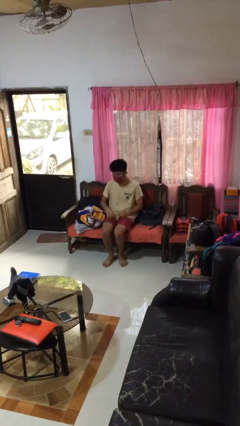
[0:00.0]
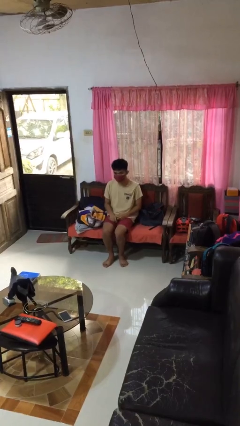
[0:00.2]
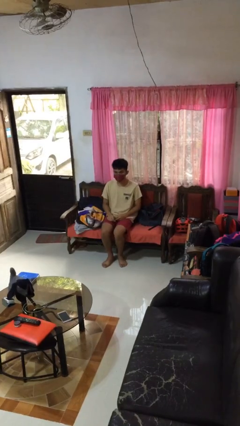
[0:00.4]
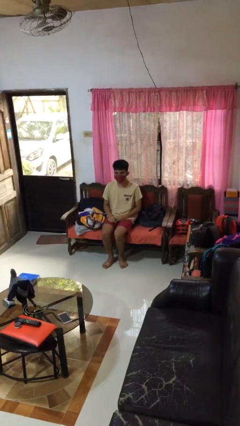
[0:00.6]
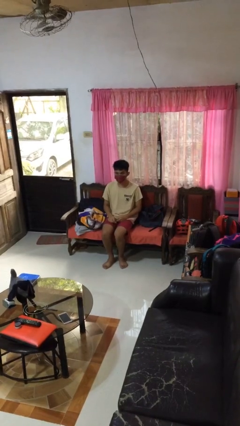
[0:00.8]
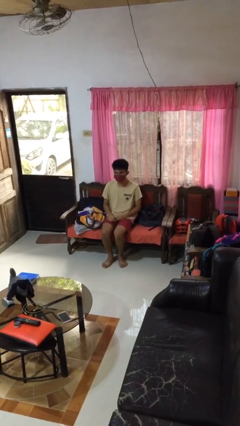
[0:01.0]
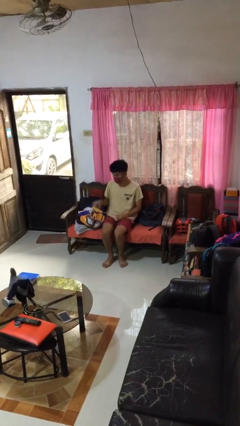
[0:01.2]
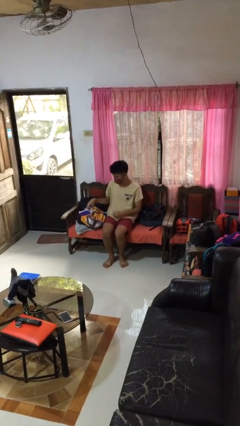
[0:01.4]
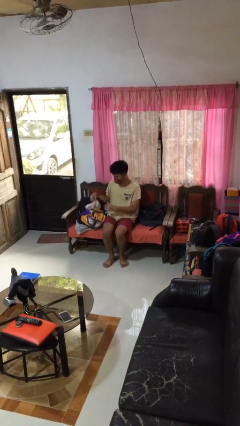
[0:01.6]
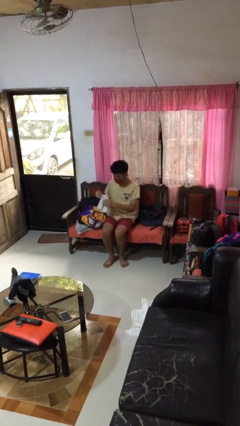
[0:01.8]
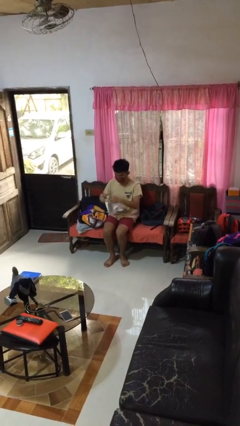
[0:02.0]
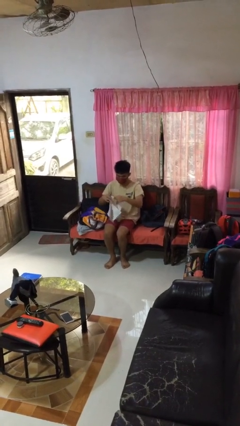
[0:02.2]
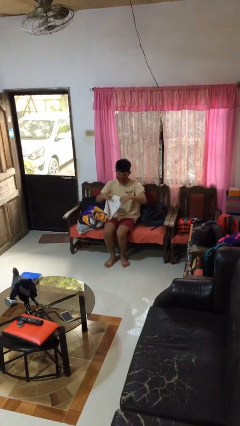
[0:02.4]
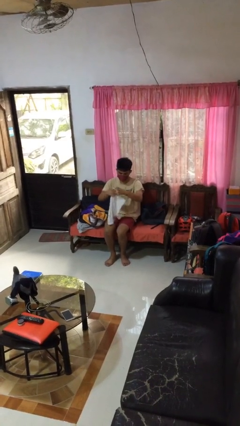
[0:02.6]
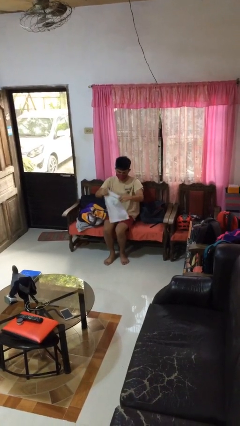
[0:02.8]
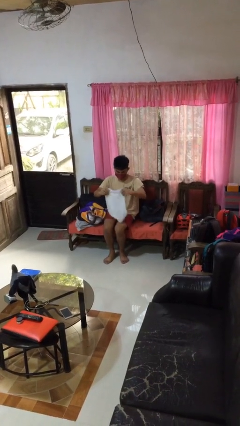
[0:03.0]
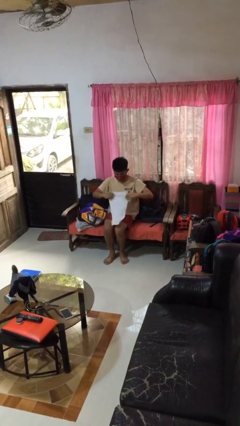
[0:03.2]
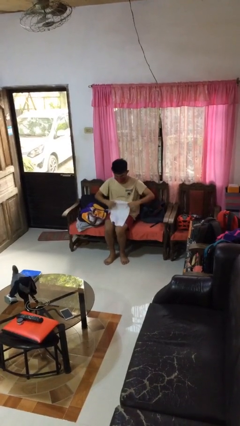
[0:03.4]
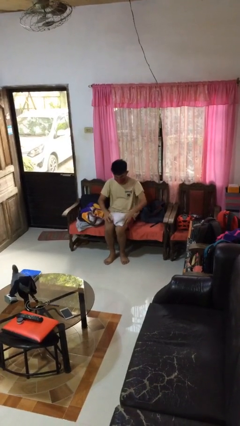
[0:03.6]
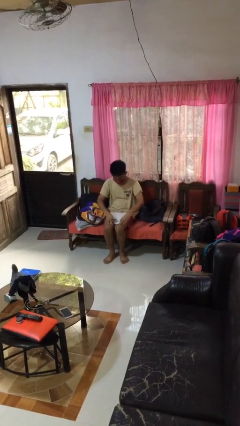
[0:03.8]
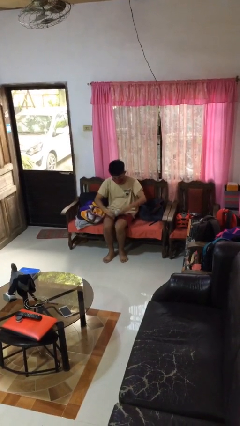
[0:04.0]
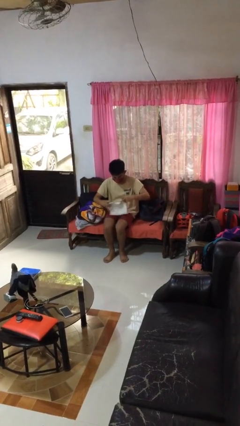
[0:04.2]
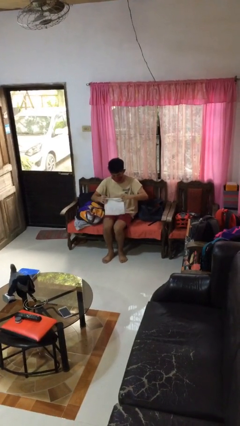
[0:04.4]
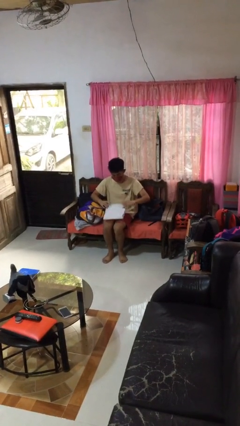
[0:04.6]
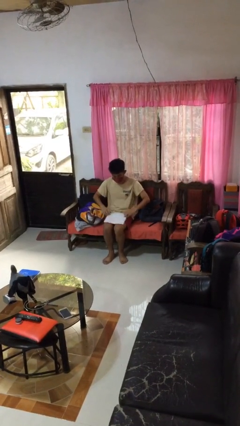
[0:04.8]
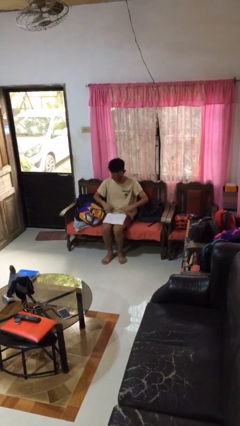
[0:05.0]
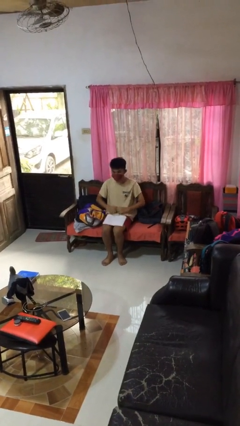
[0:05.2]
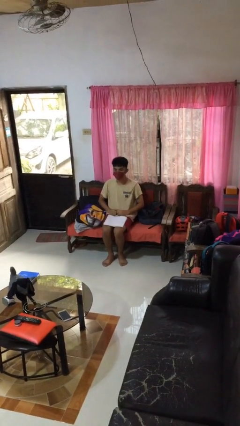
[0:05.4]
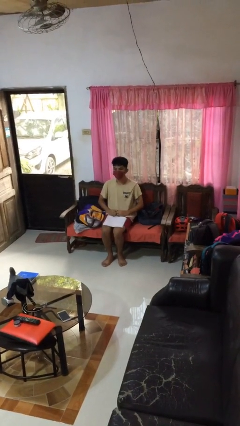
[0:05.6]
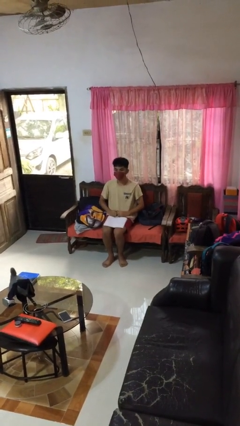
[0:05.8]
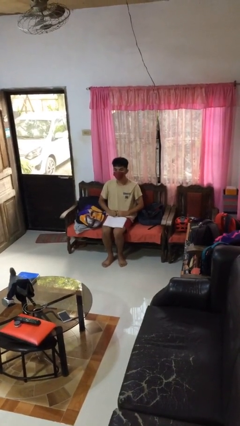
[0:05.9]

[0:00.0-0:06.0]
person folds towel

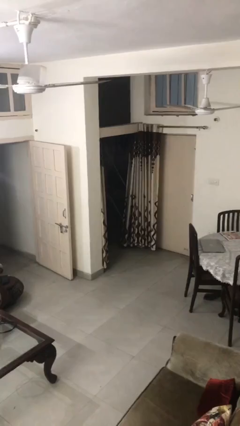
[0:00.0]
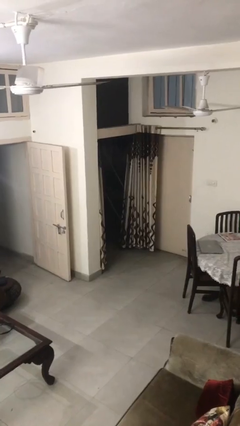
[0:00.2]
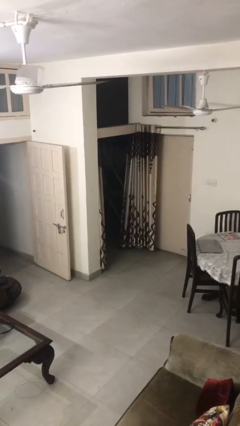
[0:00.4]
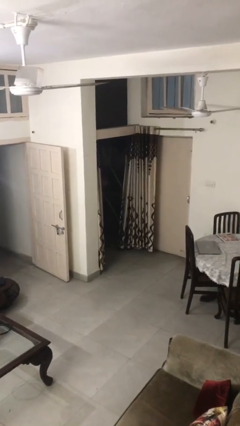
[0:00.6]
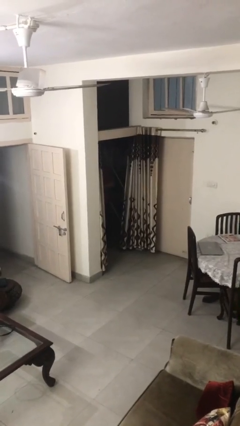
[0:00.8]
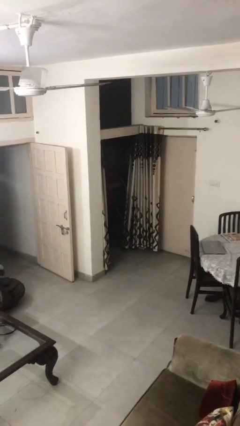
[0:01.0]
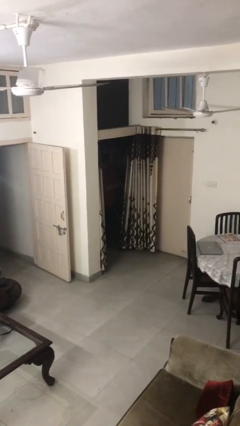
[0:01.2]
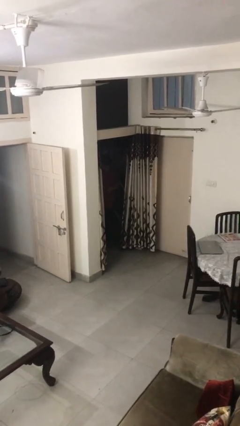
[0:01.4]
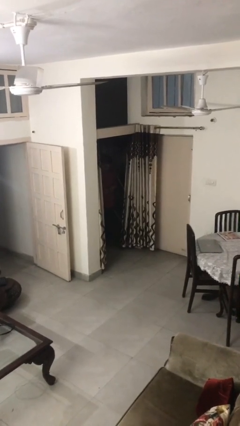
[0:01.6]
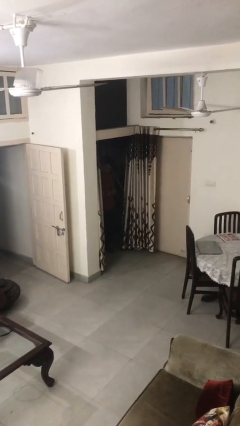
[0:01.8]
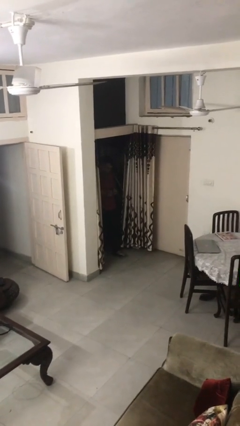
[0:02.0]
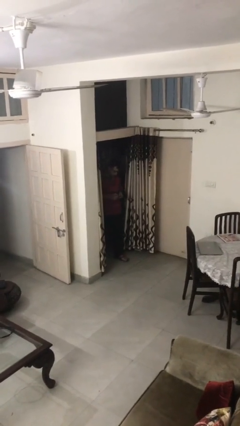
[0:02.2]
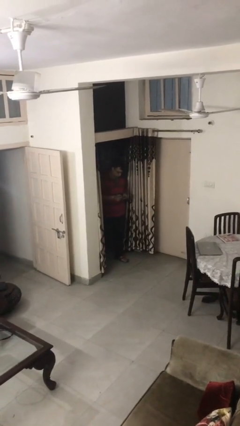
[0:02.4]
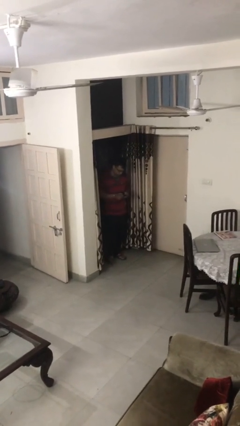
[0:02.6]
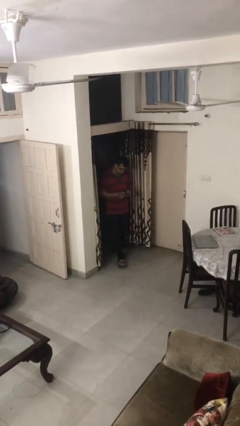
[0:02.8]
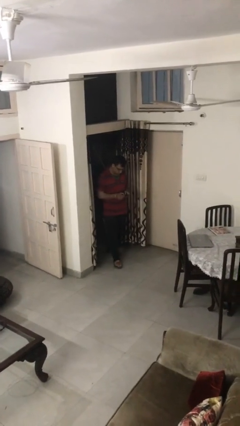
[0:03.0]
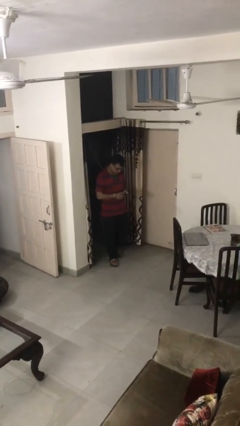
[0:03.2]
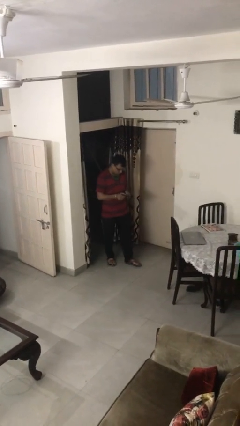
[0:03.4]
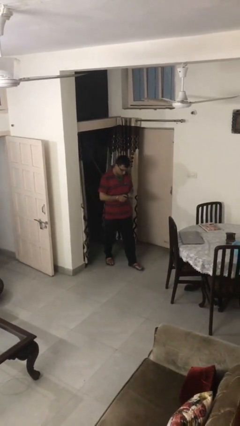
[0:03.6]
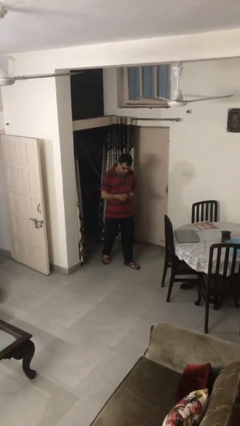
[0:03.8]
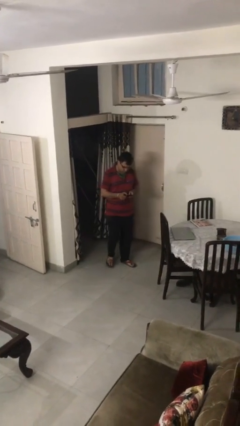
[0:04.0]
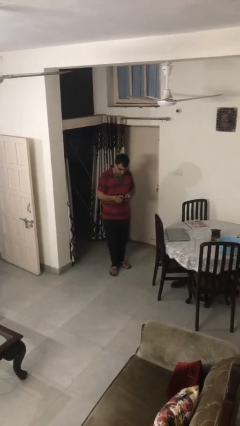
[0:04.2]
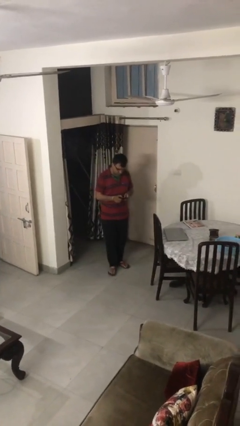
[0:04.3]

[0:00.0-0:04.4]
person enters scene through structure

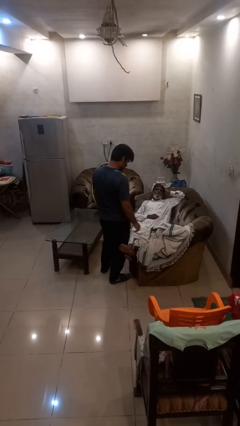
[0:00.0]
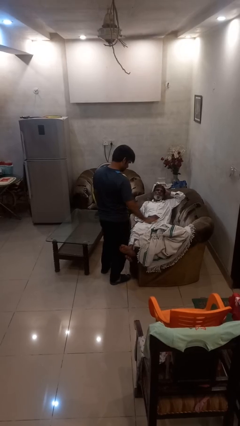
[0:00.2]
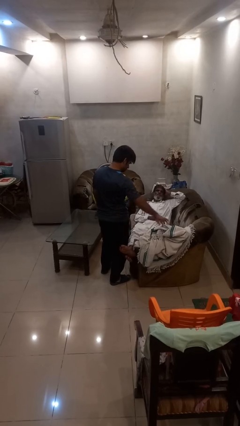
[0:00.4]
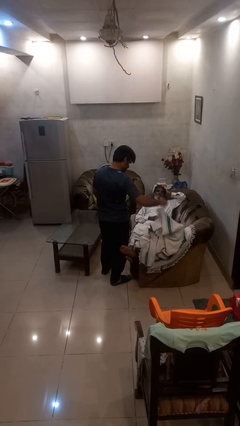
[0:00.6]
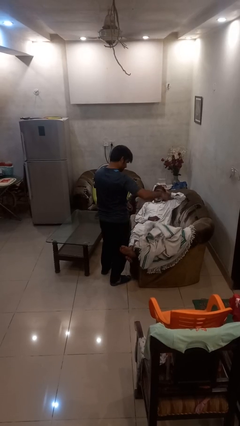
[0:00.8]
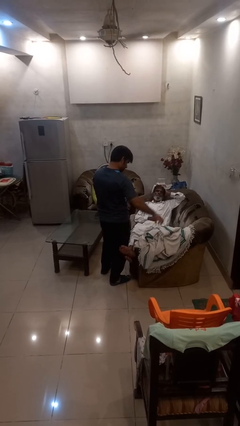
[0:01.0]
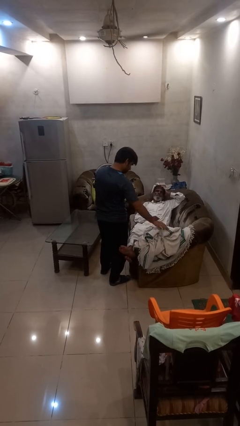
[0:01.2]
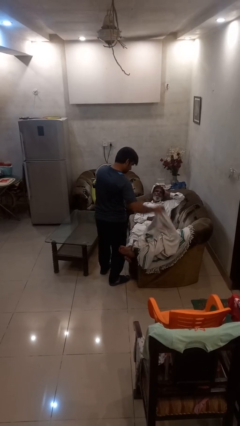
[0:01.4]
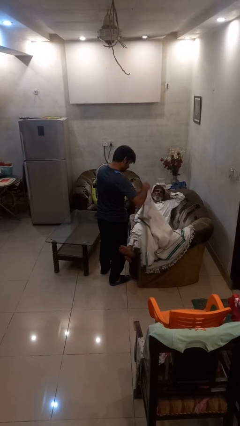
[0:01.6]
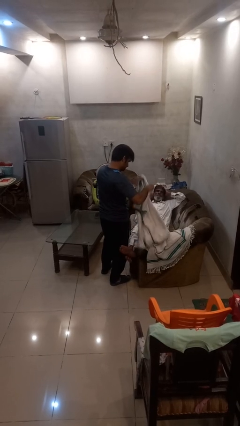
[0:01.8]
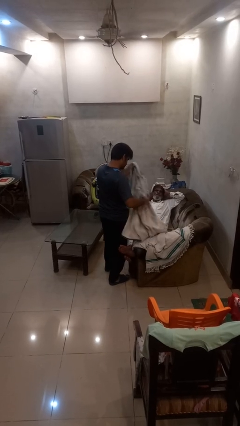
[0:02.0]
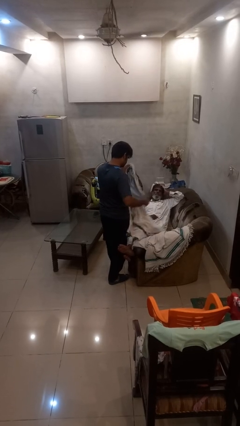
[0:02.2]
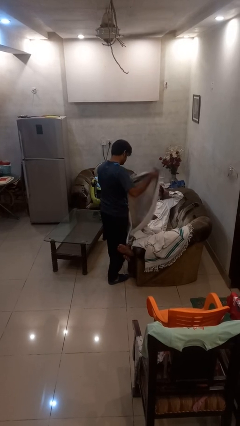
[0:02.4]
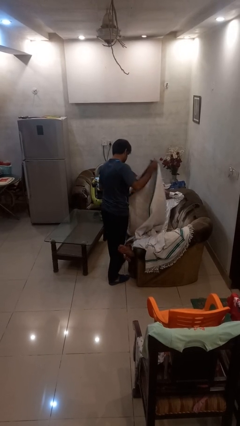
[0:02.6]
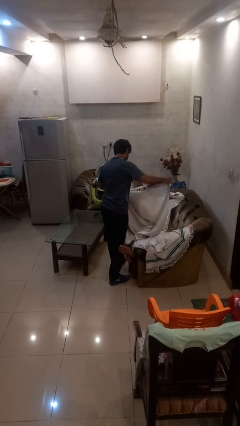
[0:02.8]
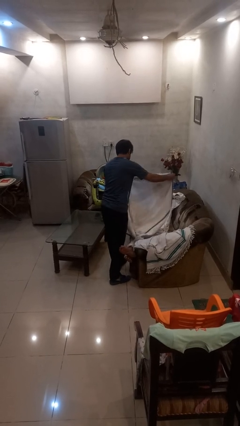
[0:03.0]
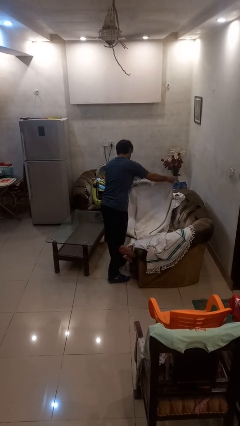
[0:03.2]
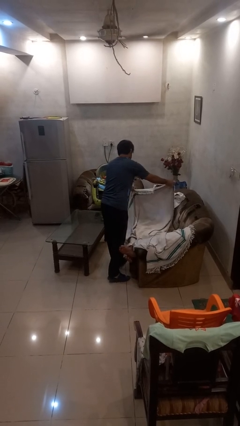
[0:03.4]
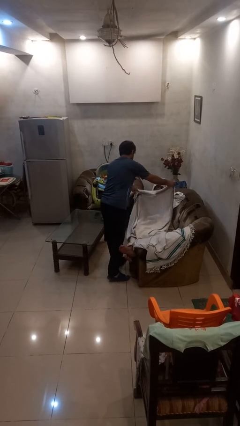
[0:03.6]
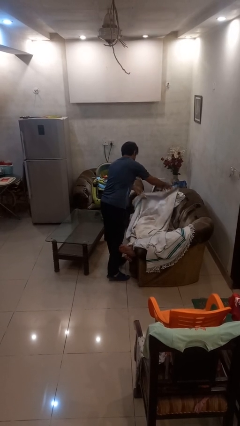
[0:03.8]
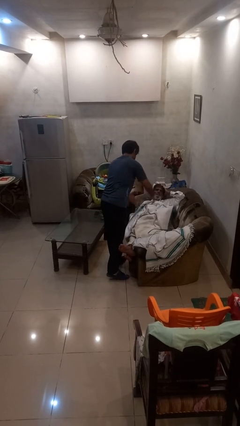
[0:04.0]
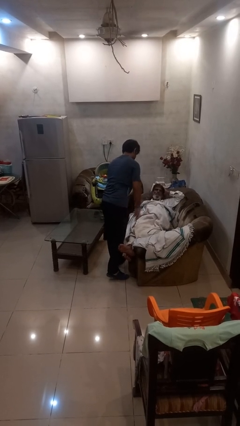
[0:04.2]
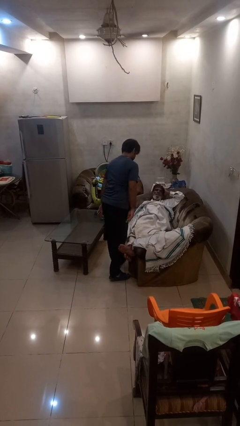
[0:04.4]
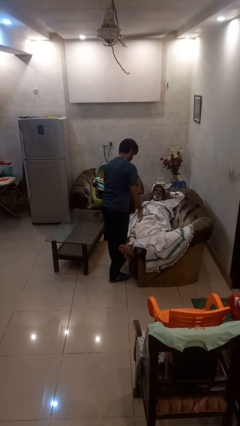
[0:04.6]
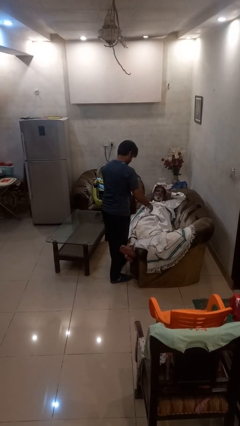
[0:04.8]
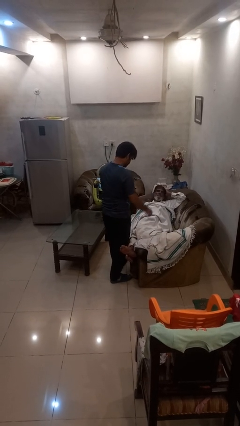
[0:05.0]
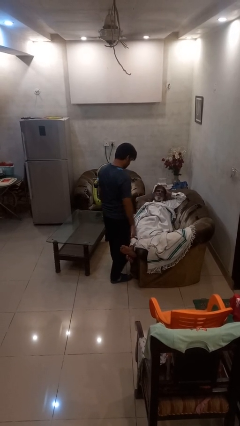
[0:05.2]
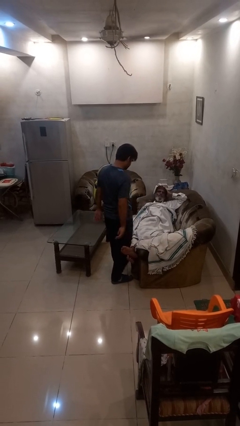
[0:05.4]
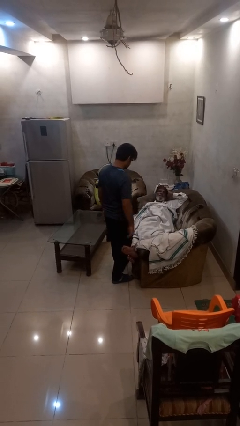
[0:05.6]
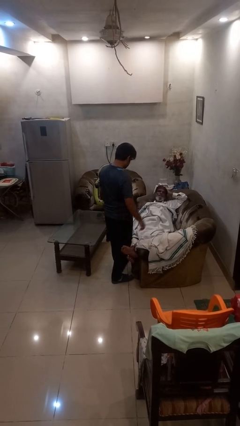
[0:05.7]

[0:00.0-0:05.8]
person covers friend with blanket

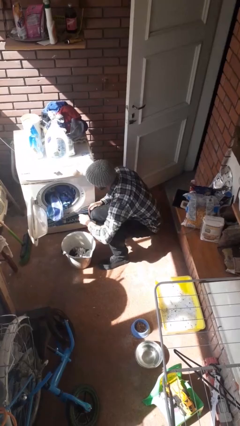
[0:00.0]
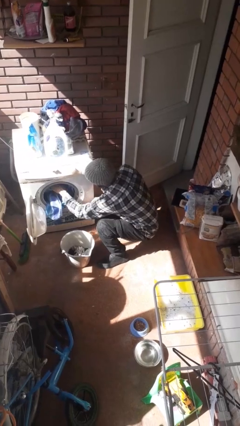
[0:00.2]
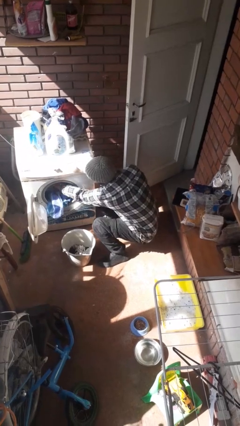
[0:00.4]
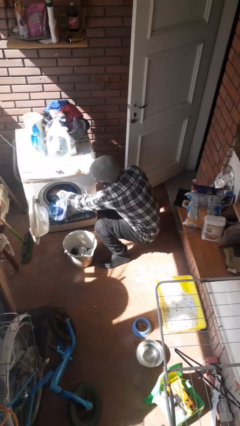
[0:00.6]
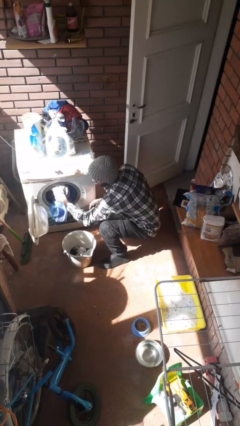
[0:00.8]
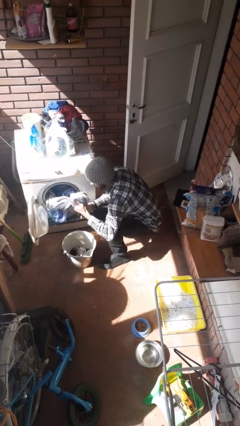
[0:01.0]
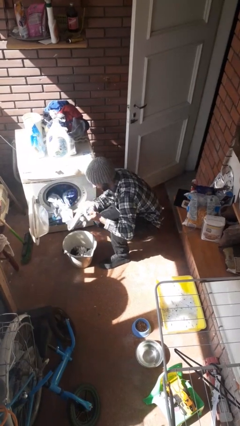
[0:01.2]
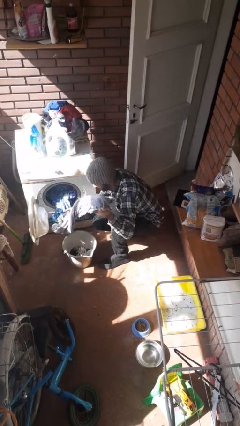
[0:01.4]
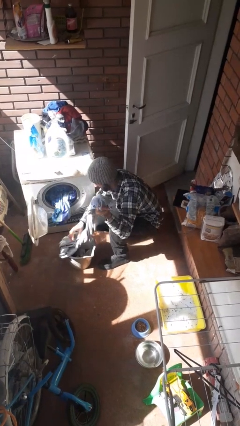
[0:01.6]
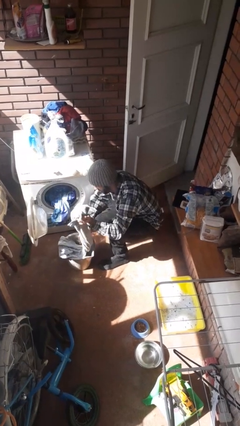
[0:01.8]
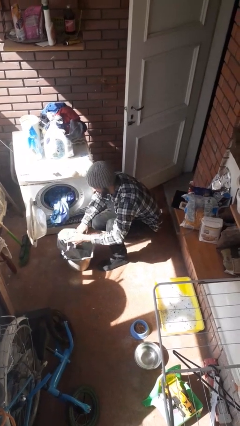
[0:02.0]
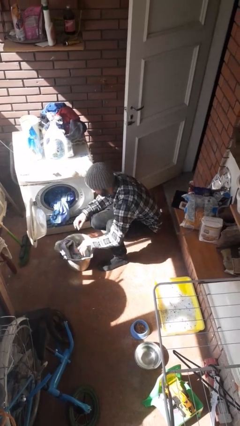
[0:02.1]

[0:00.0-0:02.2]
person unloads clotheswasher
